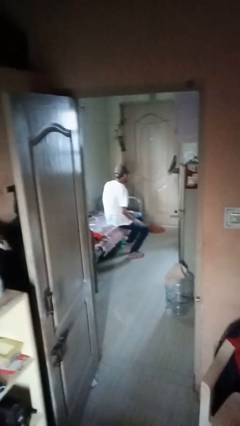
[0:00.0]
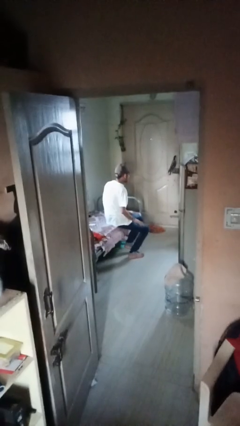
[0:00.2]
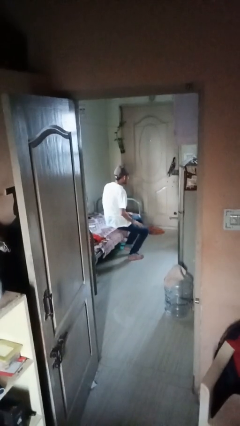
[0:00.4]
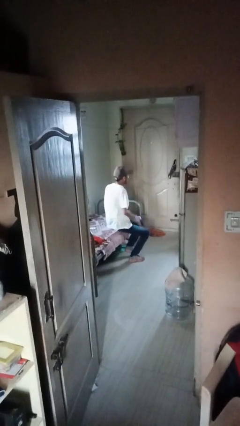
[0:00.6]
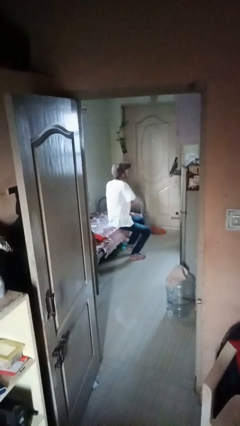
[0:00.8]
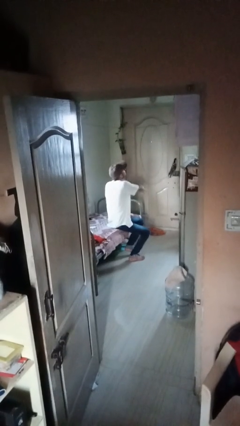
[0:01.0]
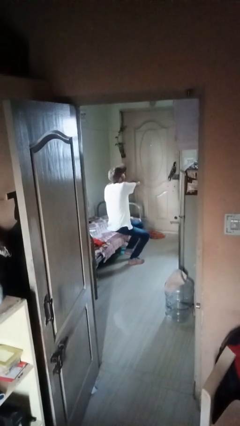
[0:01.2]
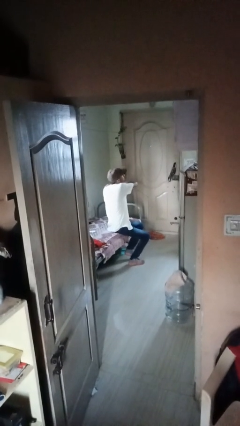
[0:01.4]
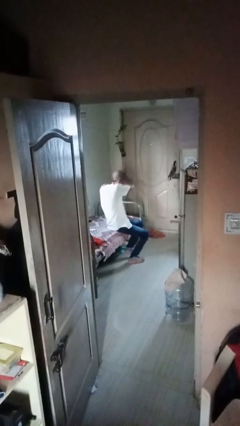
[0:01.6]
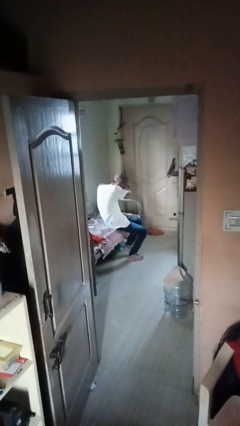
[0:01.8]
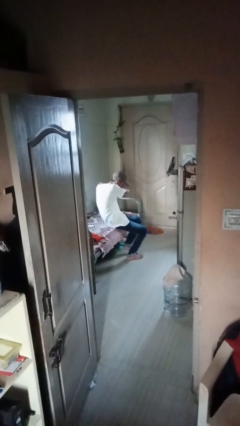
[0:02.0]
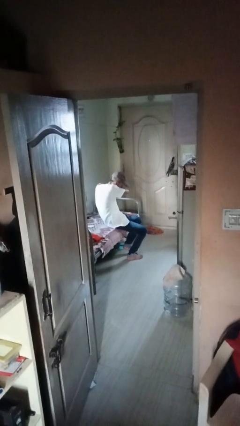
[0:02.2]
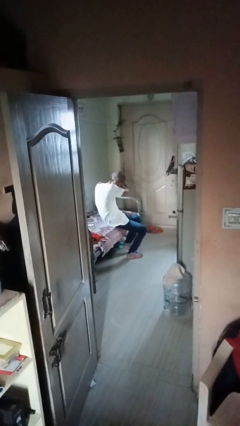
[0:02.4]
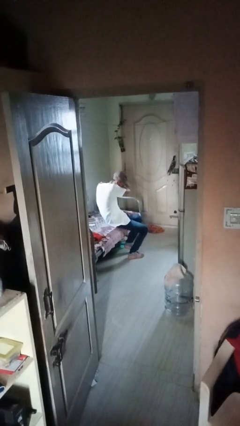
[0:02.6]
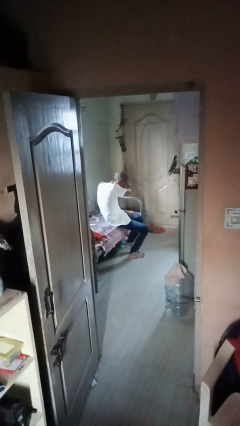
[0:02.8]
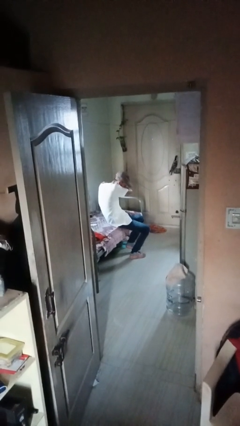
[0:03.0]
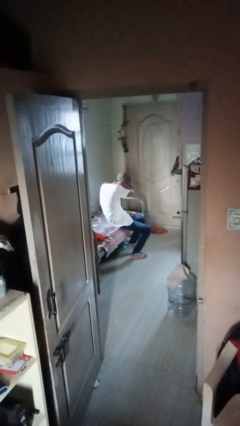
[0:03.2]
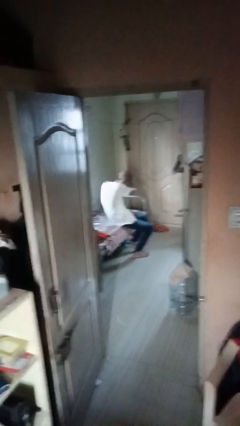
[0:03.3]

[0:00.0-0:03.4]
person sneezes into arm

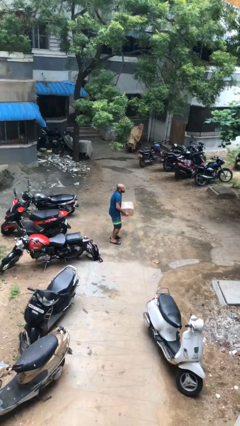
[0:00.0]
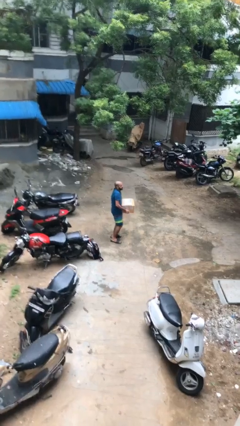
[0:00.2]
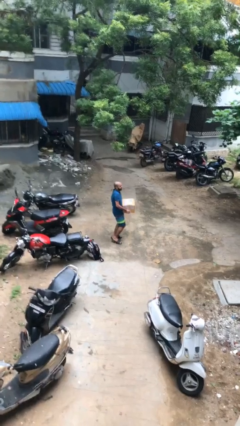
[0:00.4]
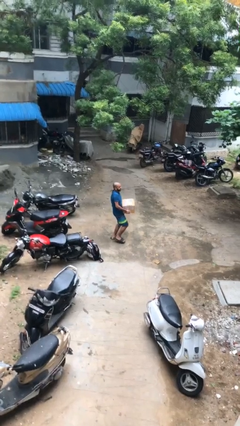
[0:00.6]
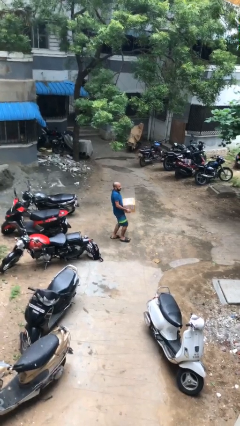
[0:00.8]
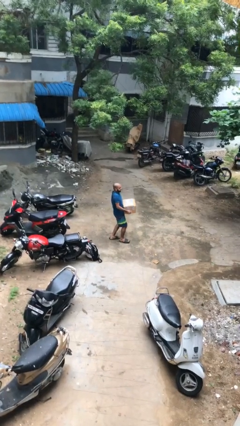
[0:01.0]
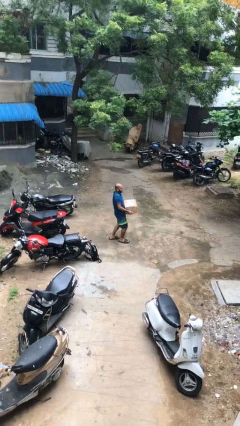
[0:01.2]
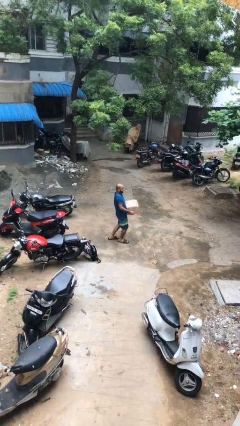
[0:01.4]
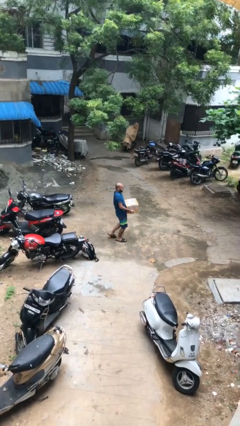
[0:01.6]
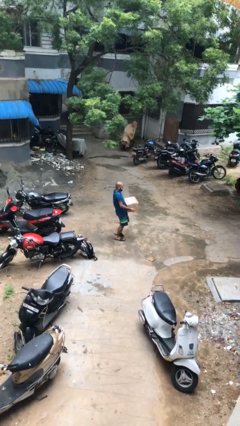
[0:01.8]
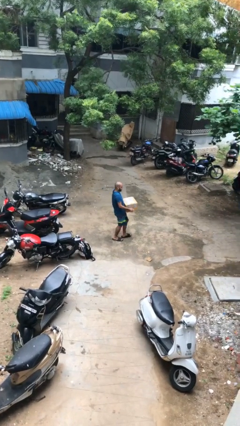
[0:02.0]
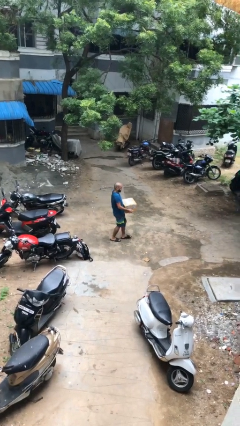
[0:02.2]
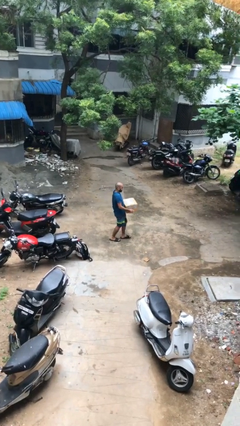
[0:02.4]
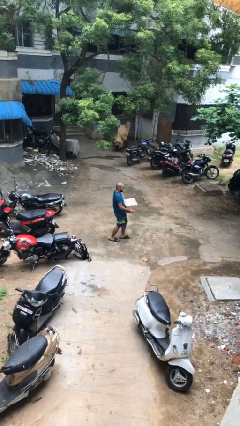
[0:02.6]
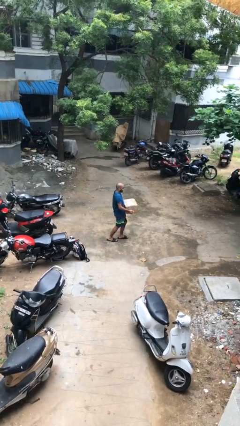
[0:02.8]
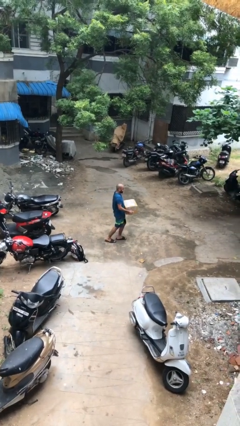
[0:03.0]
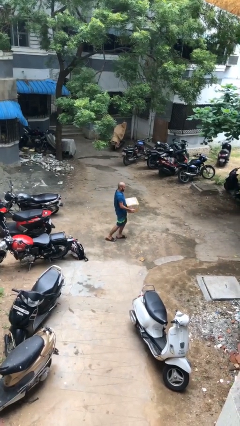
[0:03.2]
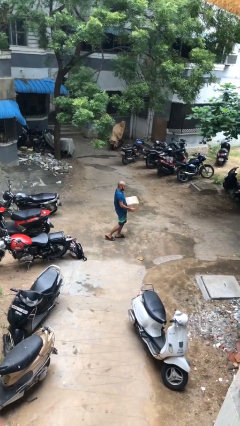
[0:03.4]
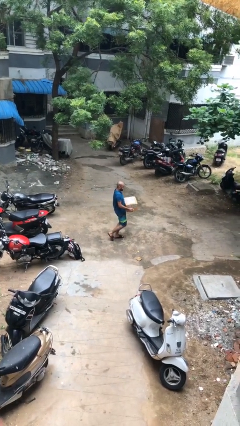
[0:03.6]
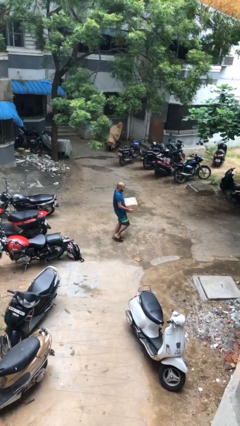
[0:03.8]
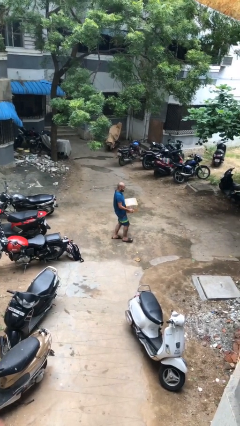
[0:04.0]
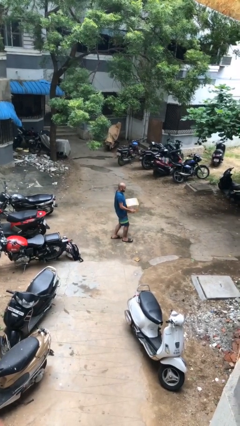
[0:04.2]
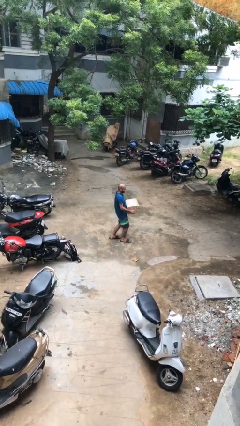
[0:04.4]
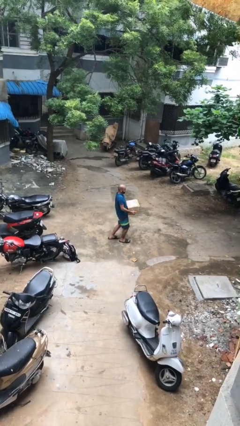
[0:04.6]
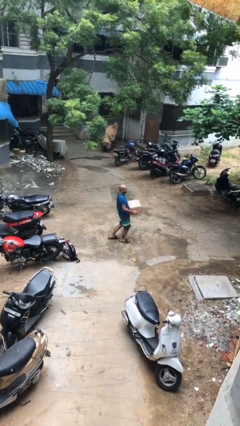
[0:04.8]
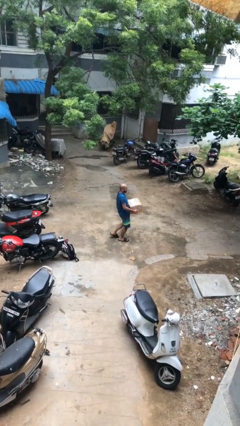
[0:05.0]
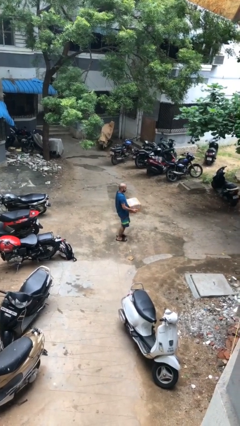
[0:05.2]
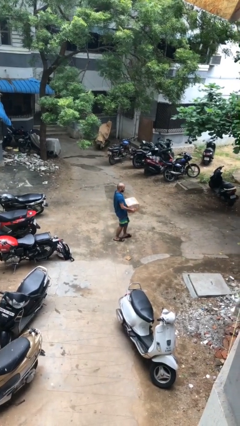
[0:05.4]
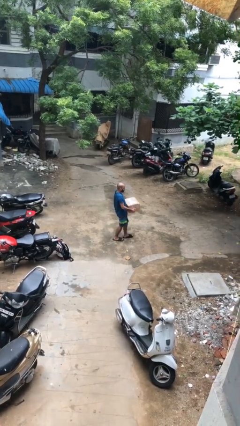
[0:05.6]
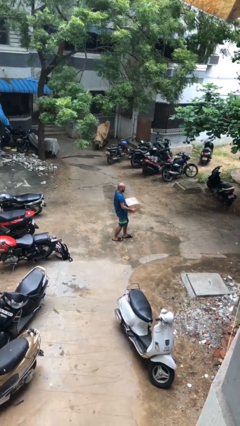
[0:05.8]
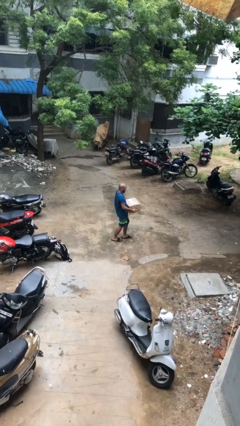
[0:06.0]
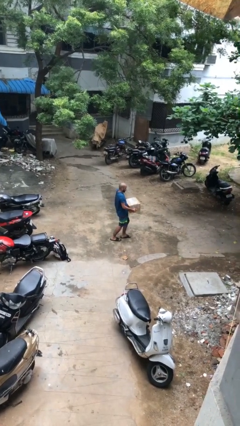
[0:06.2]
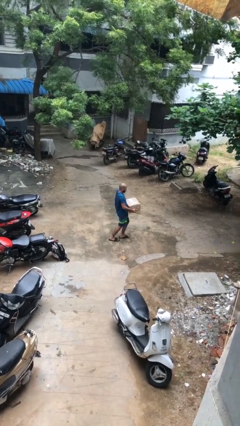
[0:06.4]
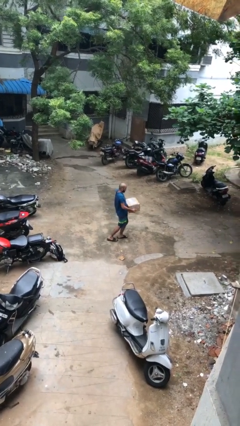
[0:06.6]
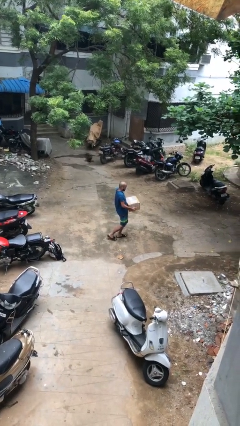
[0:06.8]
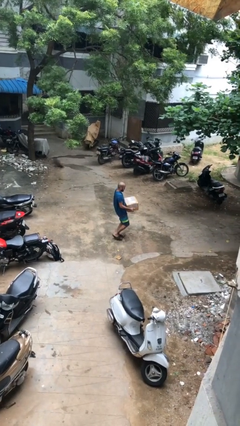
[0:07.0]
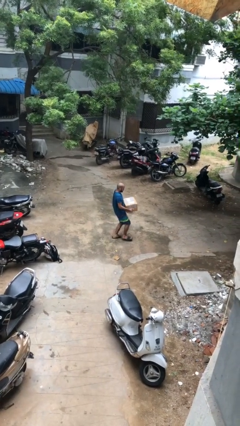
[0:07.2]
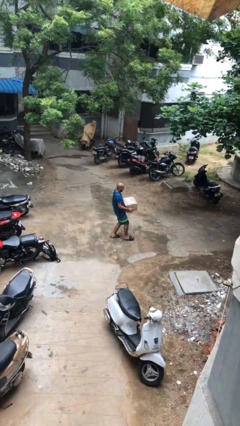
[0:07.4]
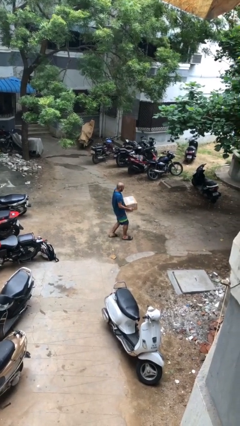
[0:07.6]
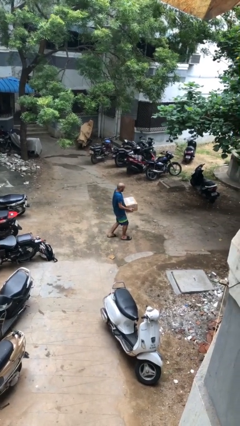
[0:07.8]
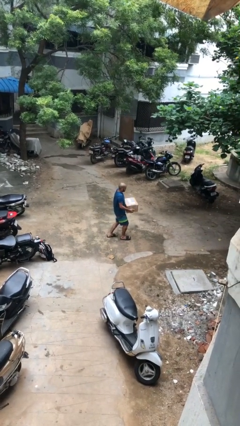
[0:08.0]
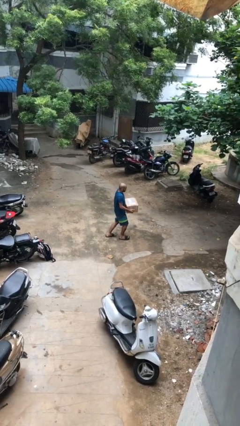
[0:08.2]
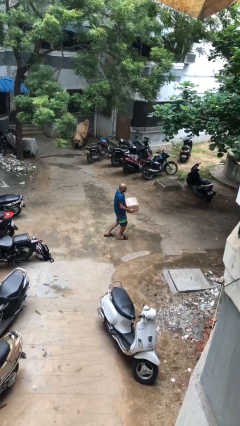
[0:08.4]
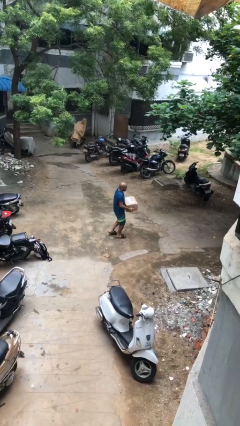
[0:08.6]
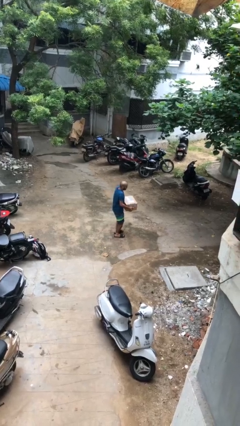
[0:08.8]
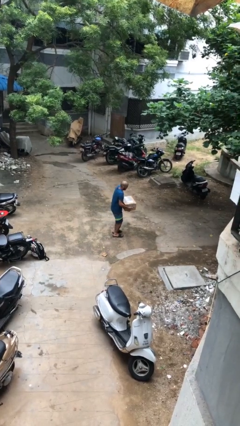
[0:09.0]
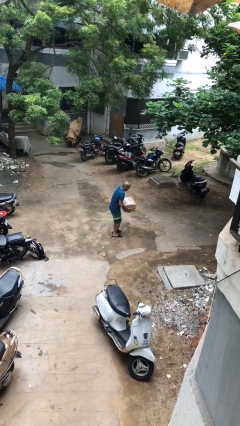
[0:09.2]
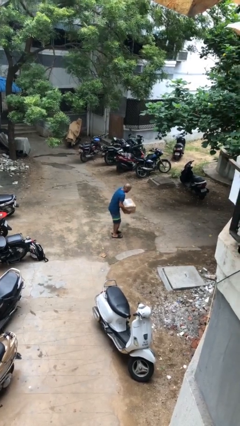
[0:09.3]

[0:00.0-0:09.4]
person carries heavy object

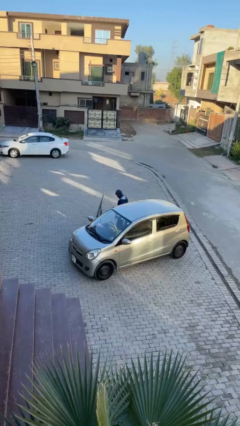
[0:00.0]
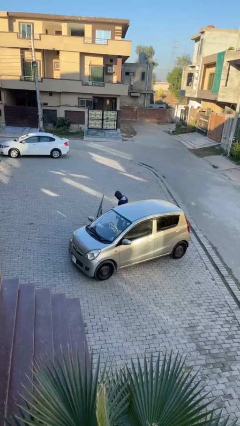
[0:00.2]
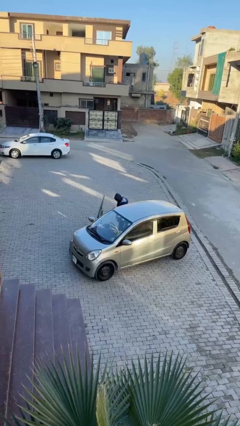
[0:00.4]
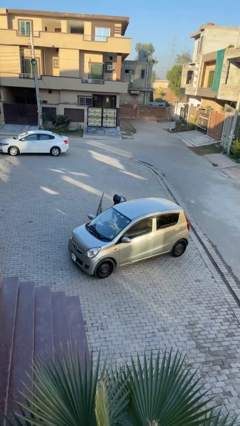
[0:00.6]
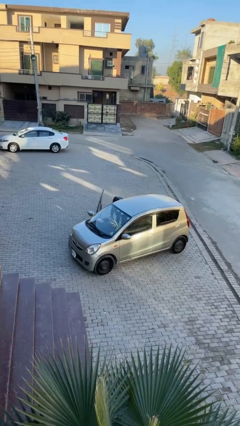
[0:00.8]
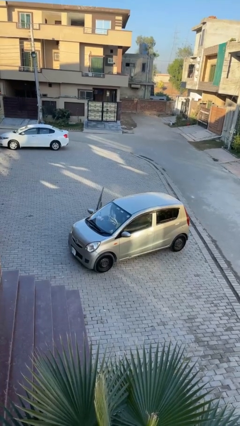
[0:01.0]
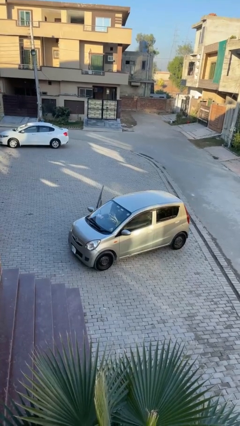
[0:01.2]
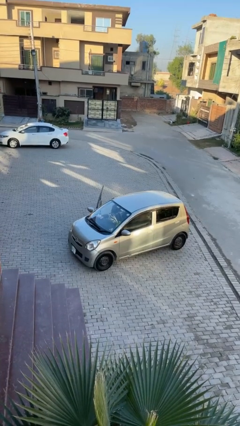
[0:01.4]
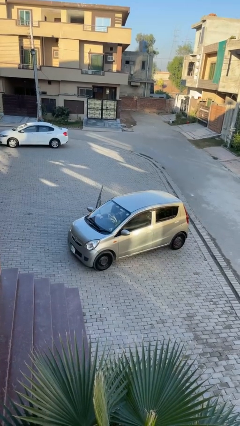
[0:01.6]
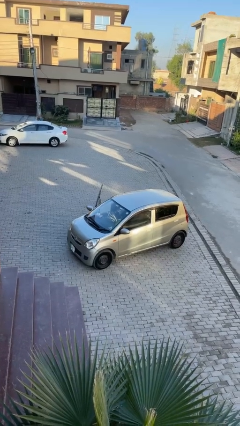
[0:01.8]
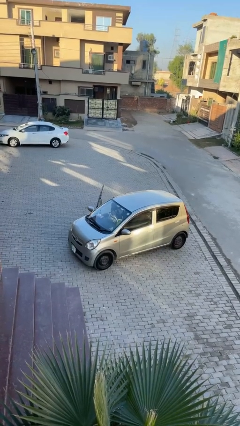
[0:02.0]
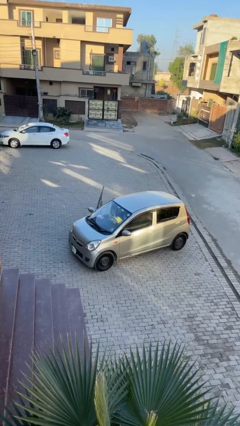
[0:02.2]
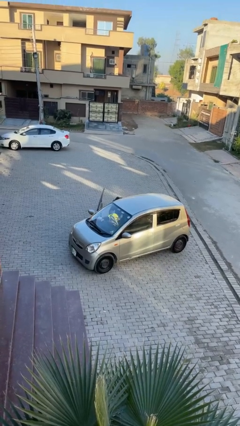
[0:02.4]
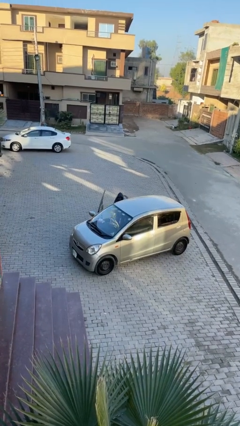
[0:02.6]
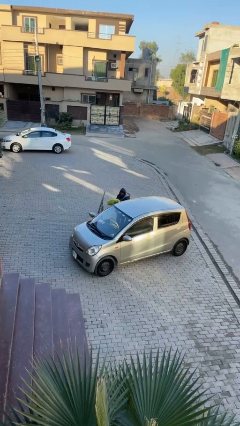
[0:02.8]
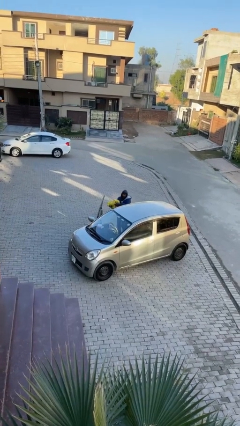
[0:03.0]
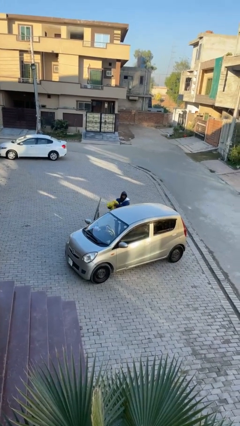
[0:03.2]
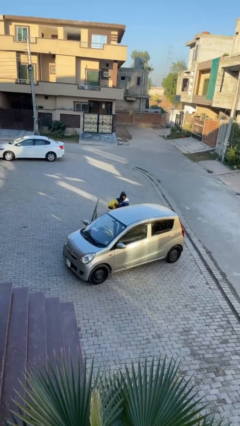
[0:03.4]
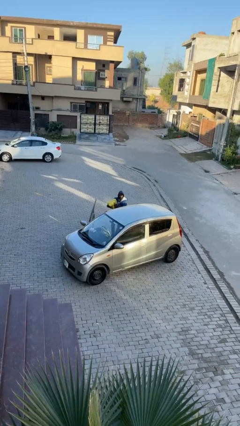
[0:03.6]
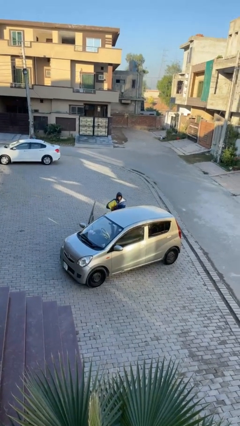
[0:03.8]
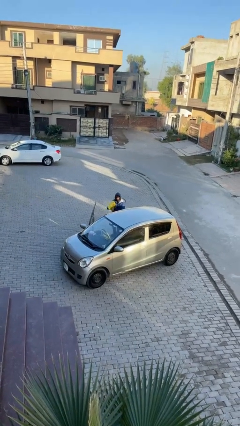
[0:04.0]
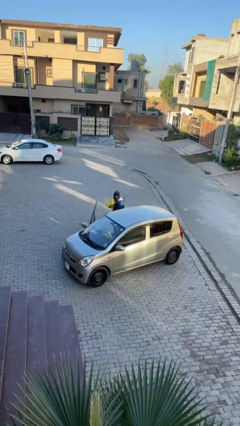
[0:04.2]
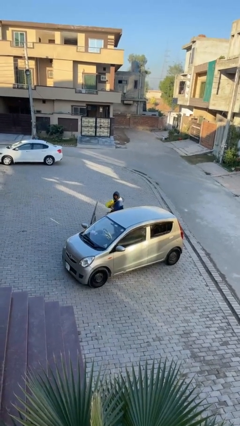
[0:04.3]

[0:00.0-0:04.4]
person unloads car

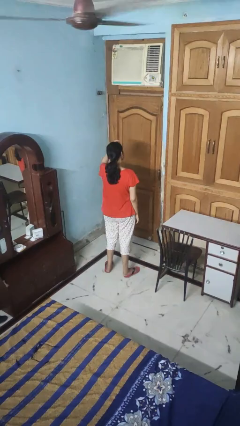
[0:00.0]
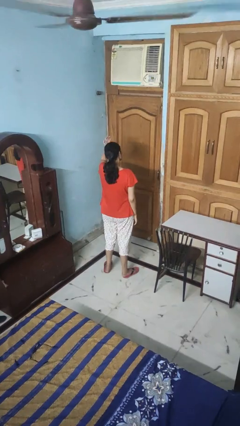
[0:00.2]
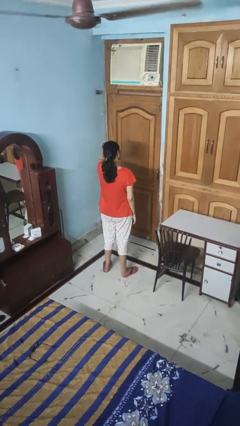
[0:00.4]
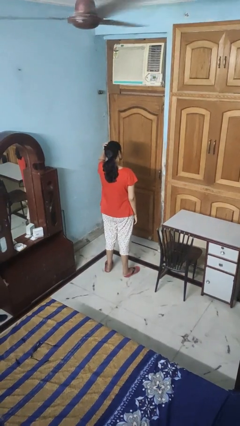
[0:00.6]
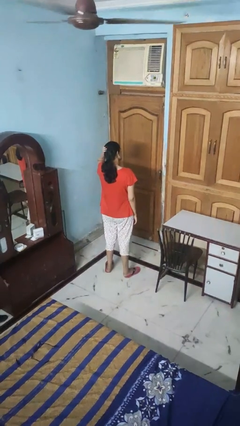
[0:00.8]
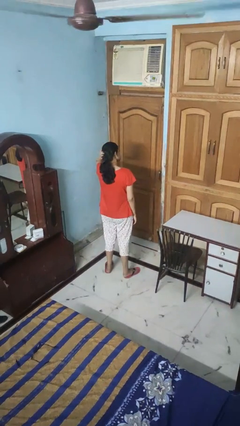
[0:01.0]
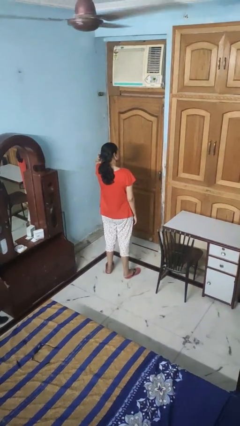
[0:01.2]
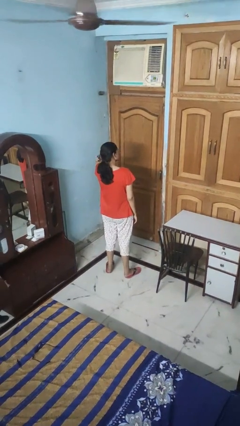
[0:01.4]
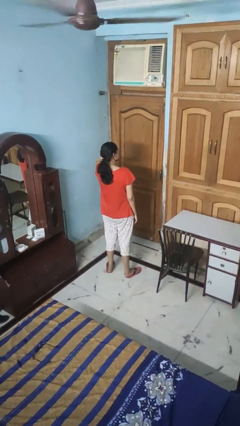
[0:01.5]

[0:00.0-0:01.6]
person pats head
